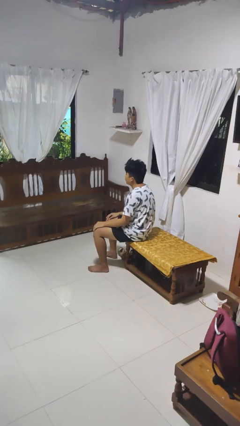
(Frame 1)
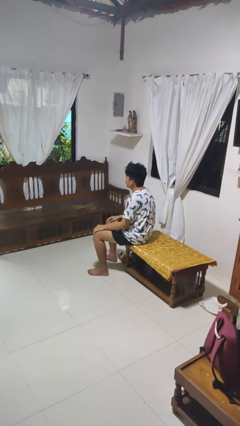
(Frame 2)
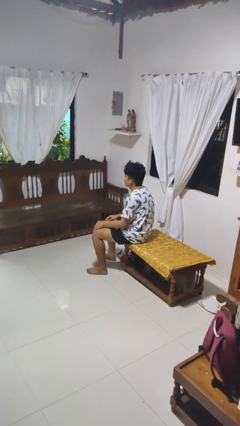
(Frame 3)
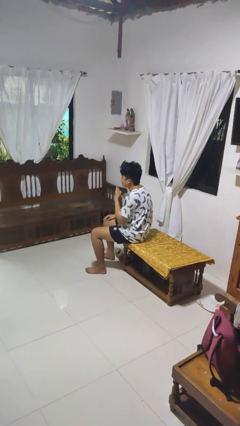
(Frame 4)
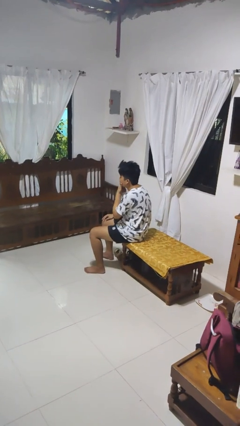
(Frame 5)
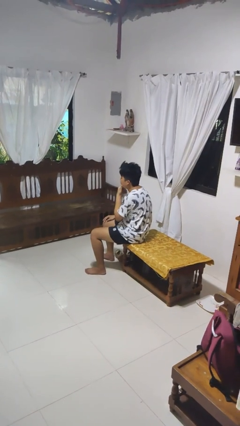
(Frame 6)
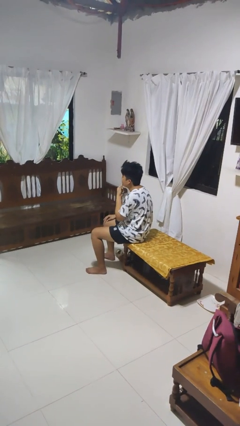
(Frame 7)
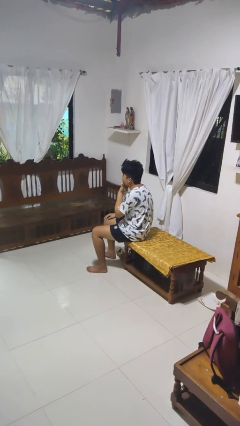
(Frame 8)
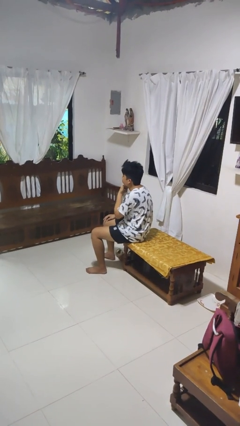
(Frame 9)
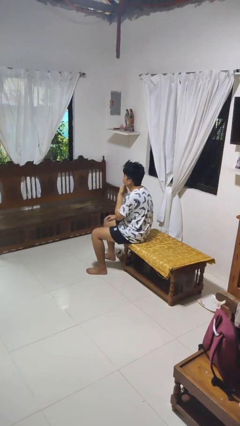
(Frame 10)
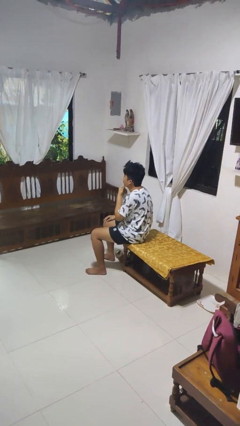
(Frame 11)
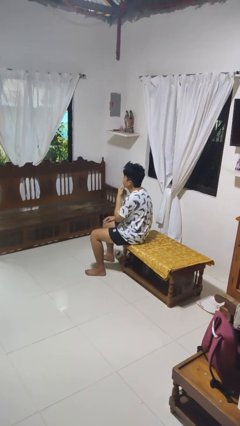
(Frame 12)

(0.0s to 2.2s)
person strokes chin

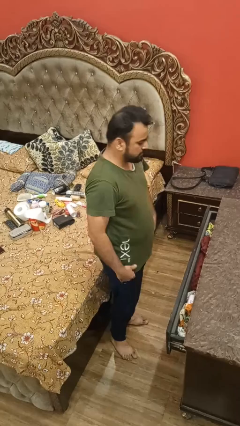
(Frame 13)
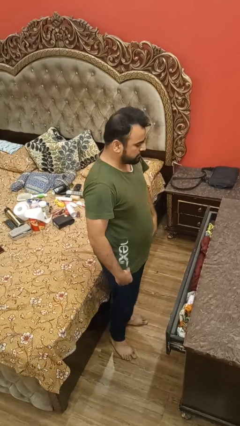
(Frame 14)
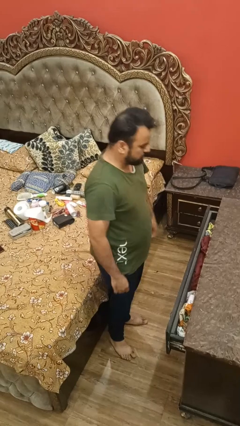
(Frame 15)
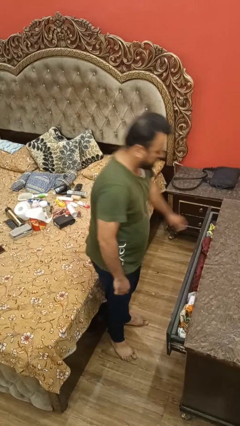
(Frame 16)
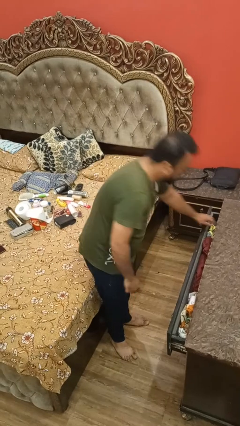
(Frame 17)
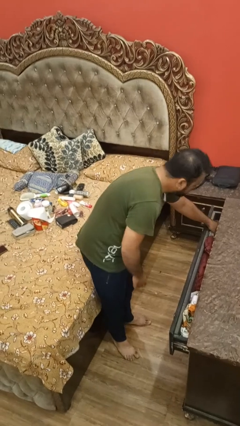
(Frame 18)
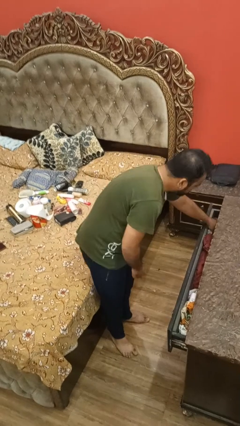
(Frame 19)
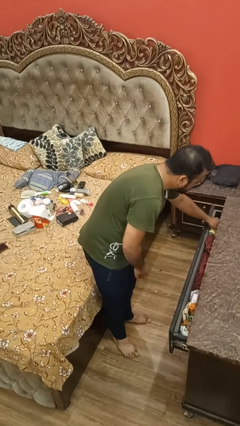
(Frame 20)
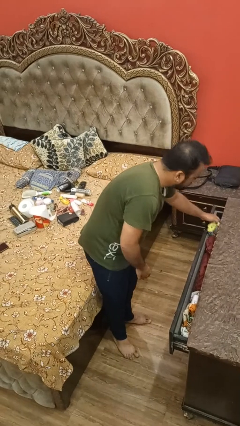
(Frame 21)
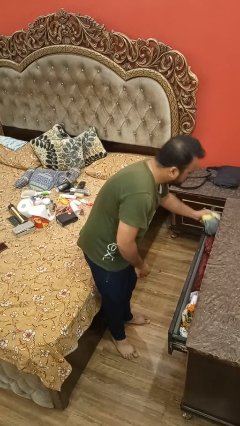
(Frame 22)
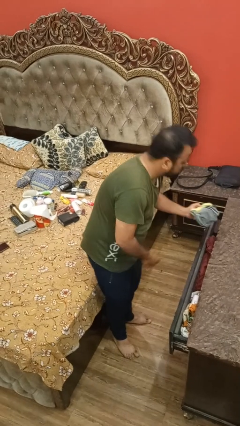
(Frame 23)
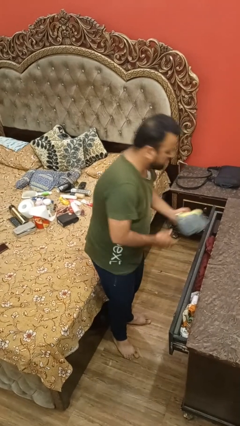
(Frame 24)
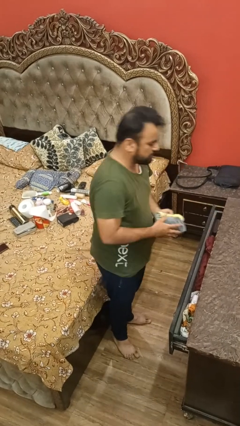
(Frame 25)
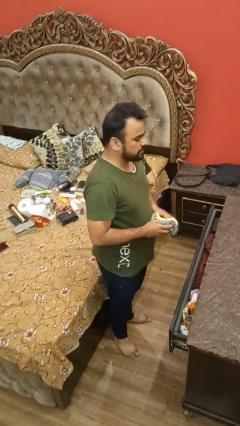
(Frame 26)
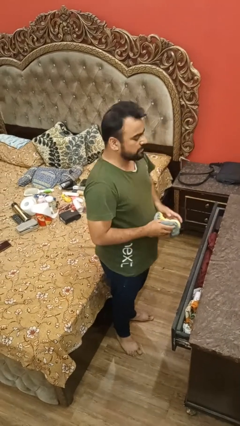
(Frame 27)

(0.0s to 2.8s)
person takes clothes from dresser

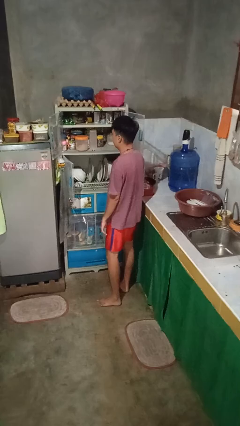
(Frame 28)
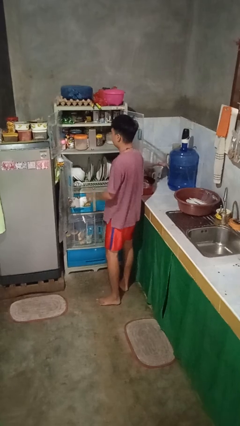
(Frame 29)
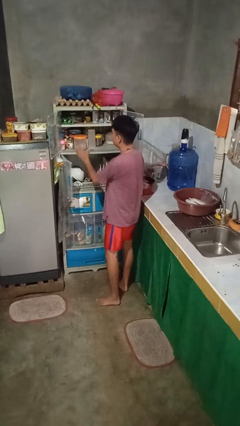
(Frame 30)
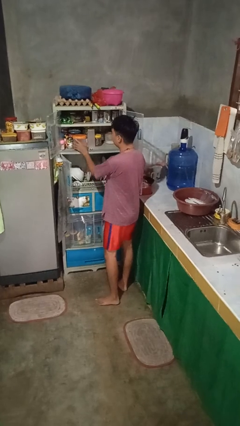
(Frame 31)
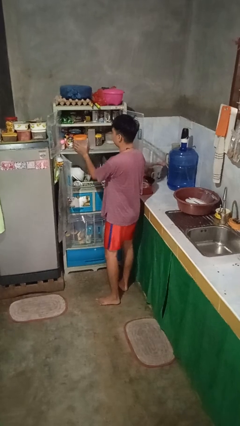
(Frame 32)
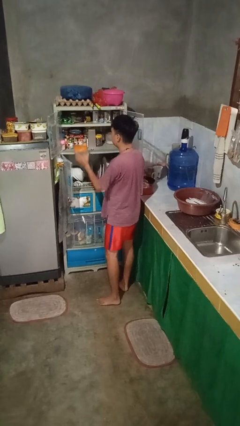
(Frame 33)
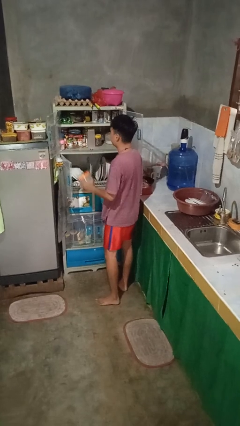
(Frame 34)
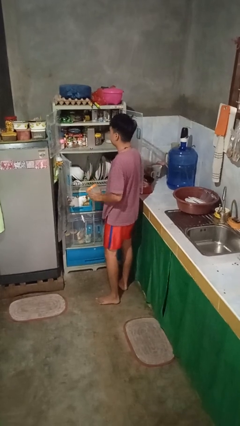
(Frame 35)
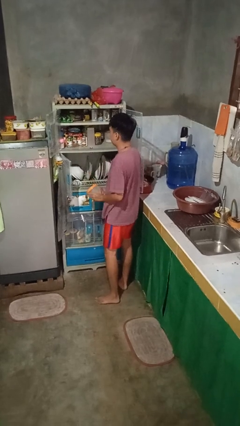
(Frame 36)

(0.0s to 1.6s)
person takes object from cabinet

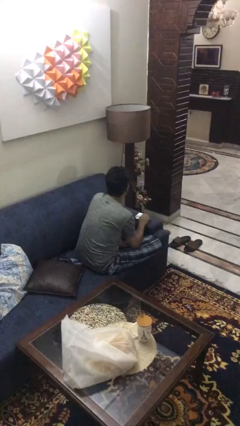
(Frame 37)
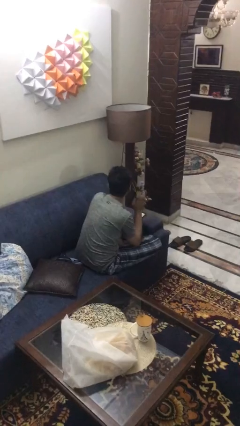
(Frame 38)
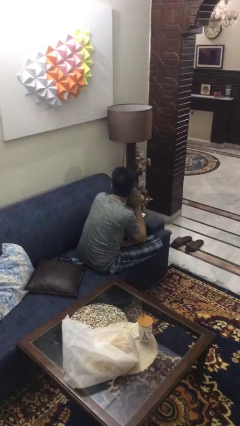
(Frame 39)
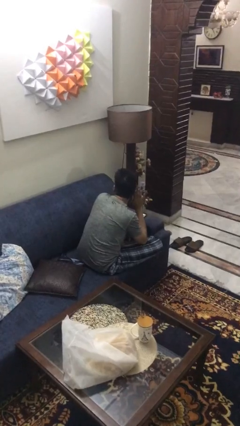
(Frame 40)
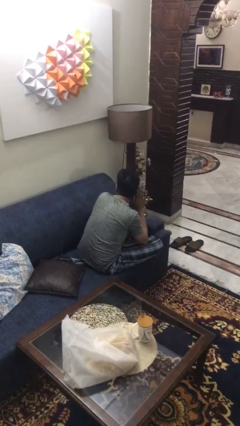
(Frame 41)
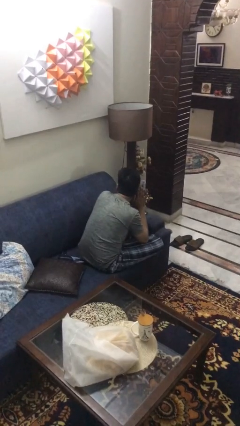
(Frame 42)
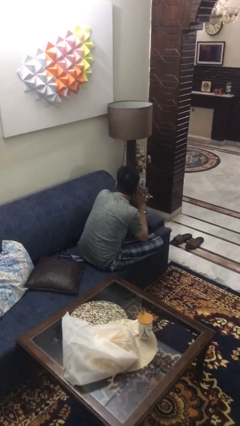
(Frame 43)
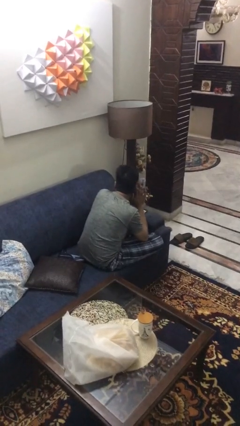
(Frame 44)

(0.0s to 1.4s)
person gestures listen closely

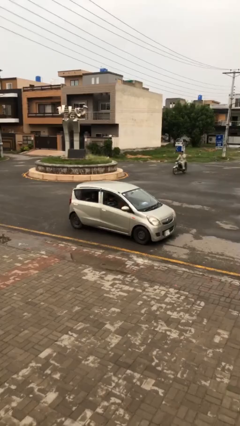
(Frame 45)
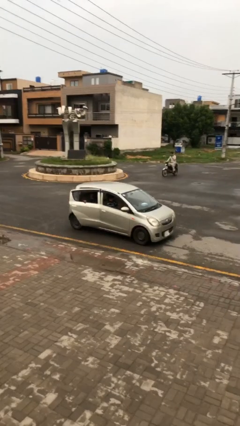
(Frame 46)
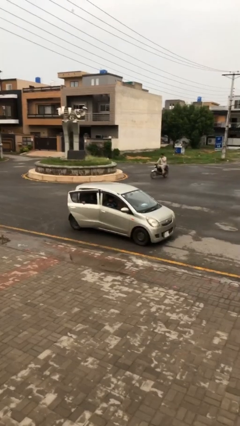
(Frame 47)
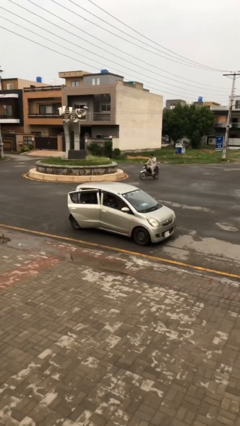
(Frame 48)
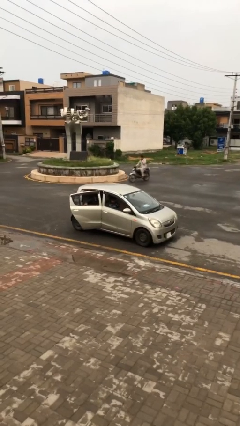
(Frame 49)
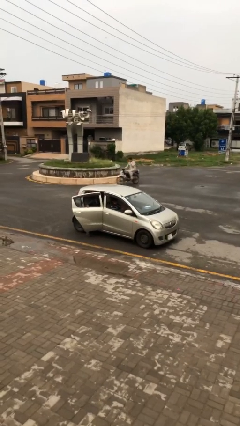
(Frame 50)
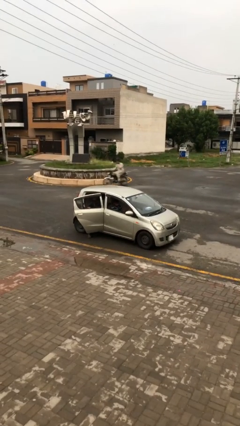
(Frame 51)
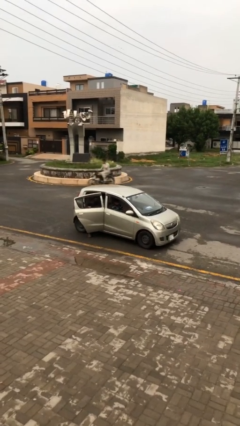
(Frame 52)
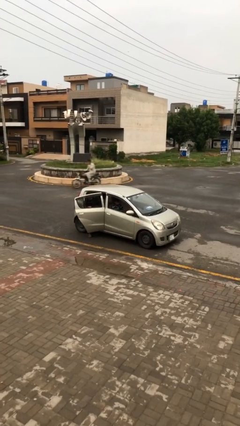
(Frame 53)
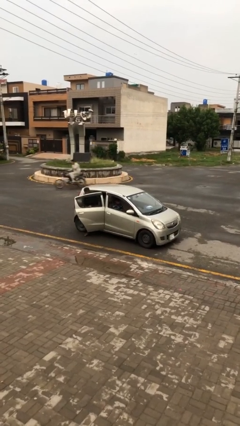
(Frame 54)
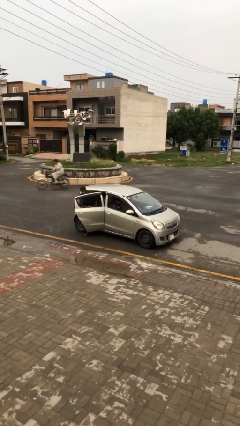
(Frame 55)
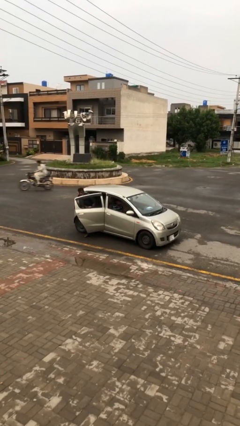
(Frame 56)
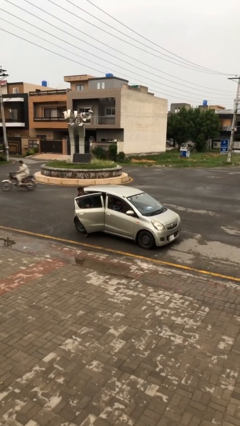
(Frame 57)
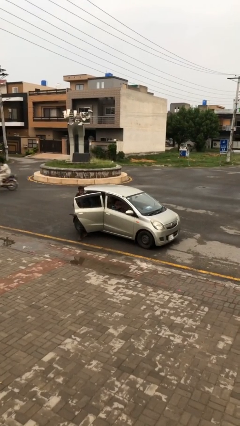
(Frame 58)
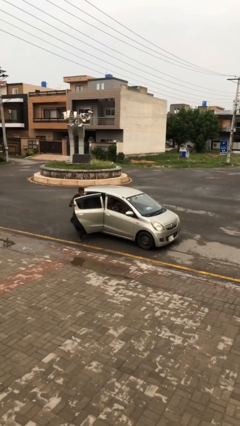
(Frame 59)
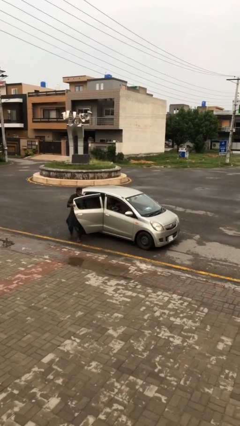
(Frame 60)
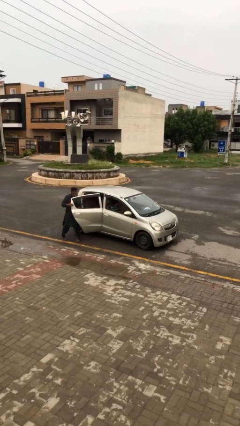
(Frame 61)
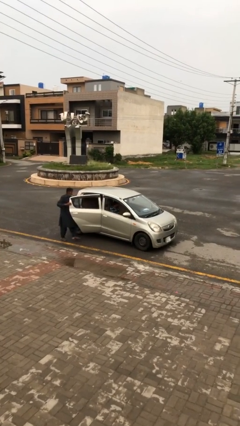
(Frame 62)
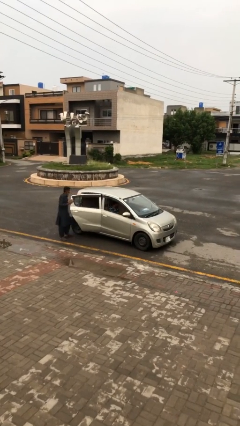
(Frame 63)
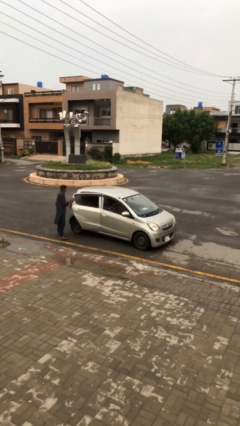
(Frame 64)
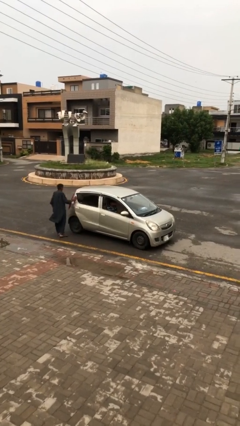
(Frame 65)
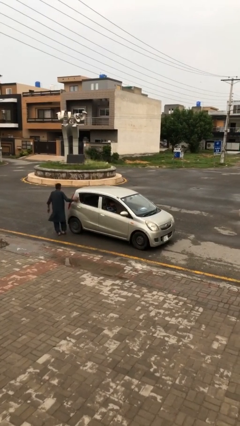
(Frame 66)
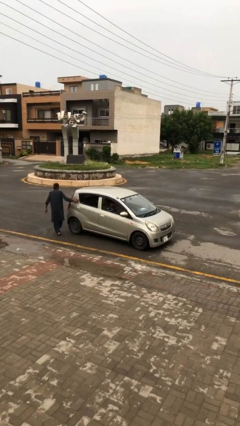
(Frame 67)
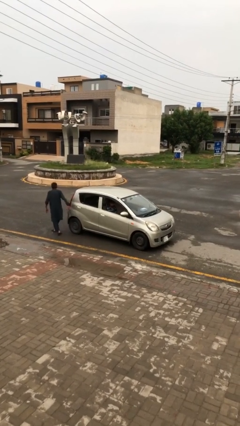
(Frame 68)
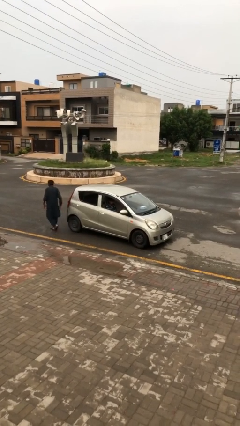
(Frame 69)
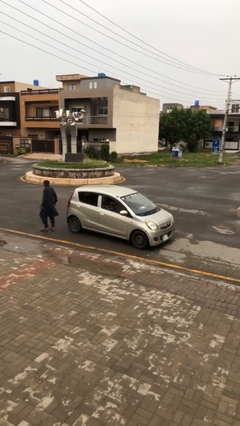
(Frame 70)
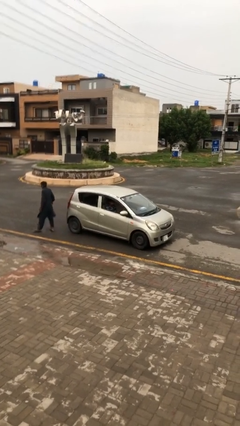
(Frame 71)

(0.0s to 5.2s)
car drops off person

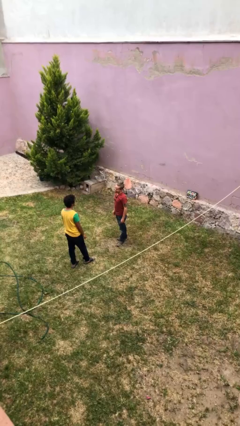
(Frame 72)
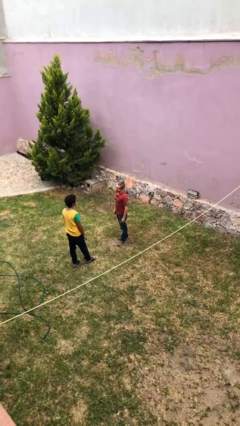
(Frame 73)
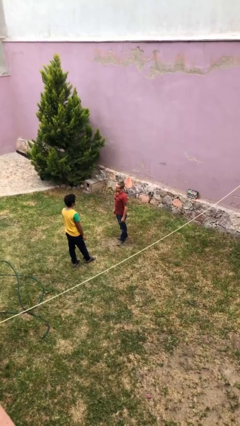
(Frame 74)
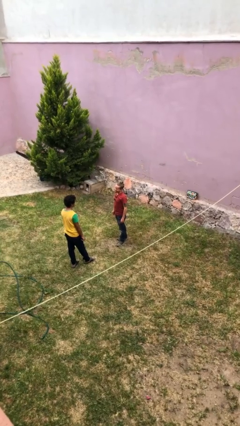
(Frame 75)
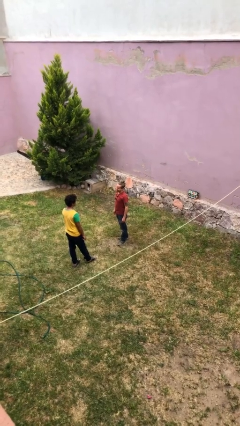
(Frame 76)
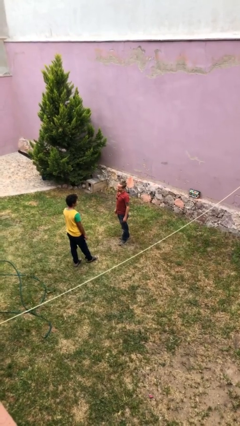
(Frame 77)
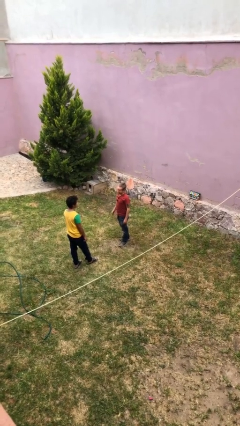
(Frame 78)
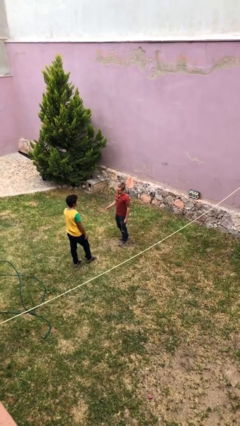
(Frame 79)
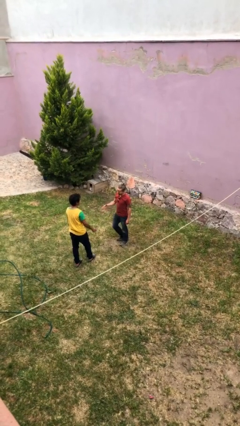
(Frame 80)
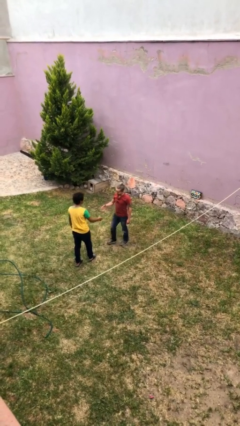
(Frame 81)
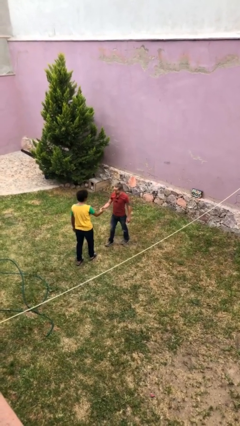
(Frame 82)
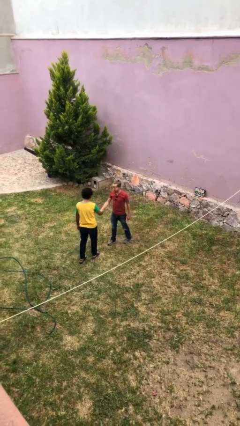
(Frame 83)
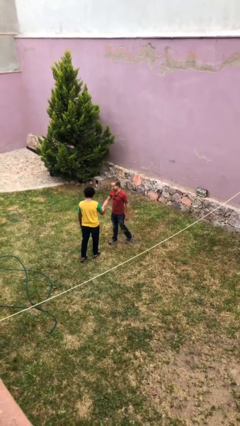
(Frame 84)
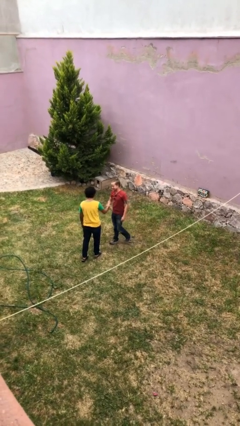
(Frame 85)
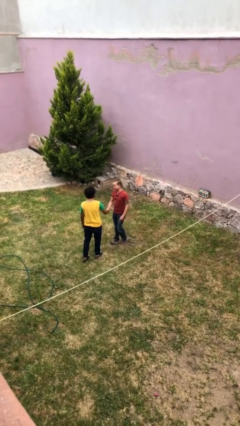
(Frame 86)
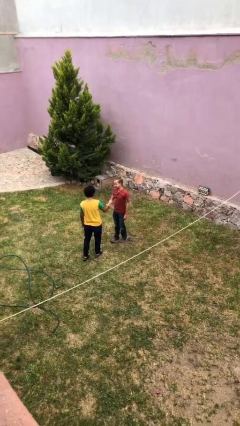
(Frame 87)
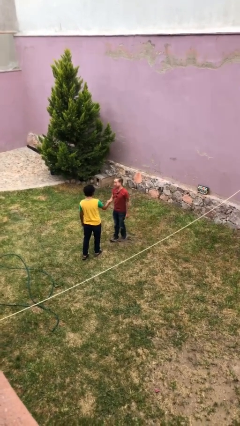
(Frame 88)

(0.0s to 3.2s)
person shakes hand

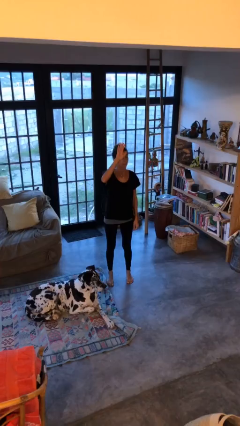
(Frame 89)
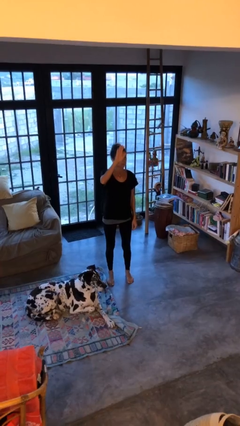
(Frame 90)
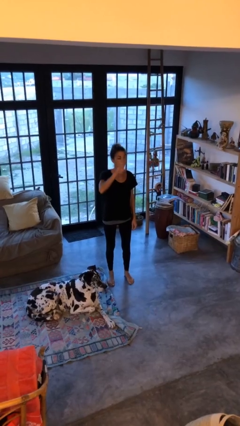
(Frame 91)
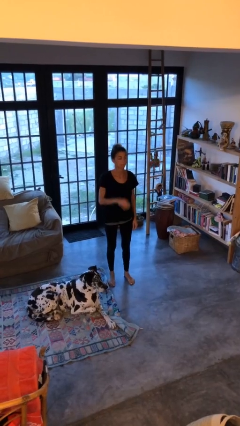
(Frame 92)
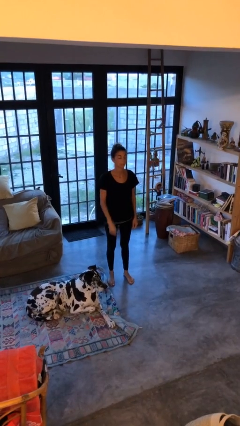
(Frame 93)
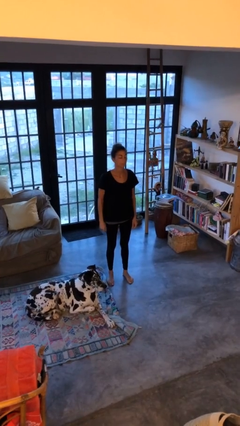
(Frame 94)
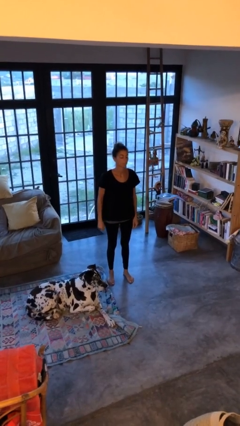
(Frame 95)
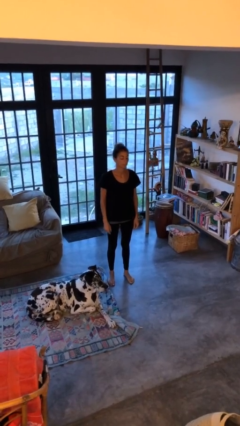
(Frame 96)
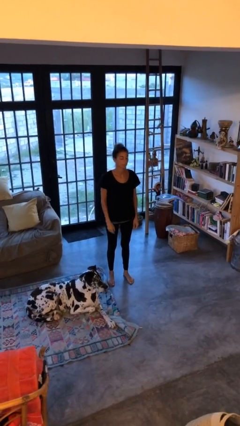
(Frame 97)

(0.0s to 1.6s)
person gestures lower hand
